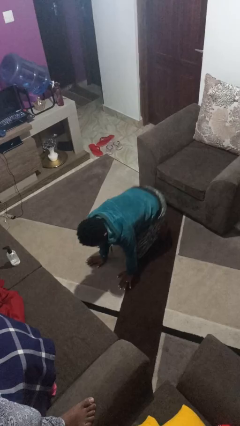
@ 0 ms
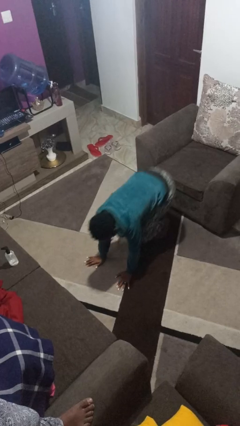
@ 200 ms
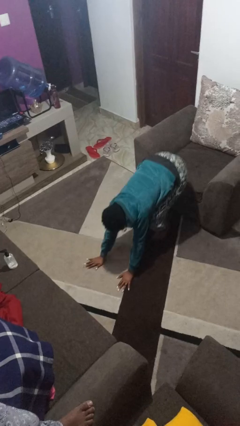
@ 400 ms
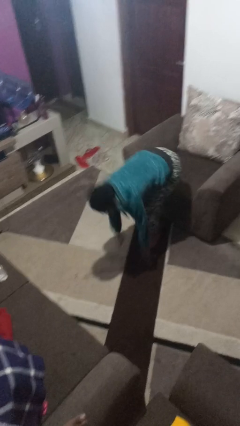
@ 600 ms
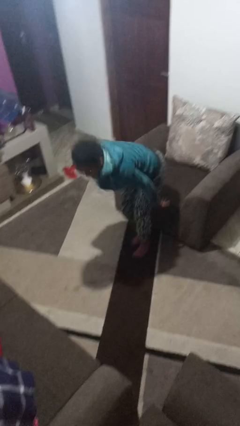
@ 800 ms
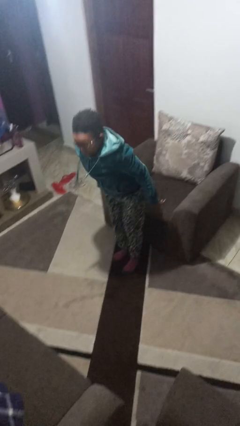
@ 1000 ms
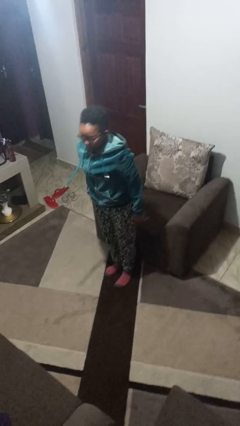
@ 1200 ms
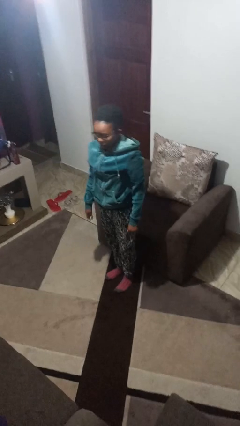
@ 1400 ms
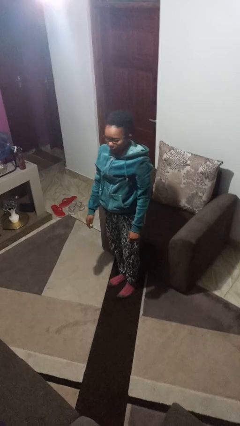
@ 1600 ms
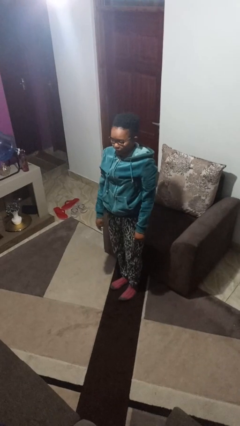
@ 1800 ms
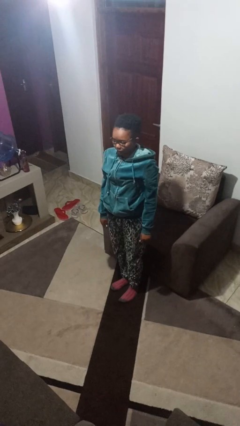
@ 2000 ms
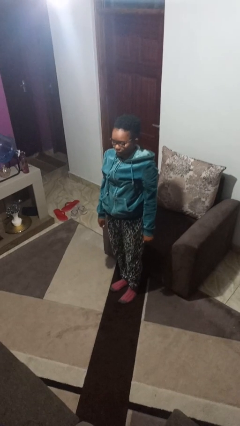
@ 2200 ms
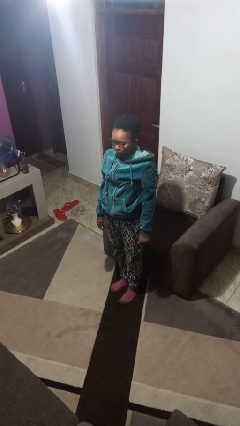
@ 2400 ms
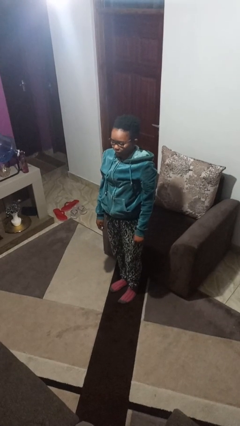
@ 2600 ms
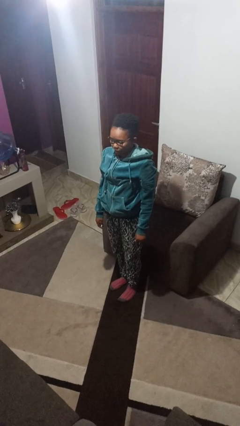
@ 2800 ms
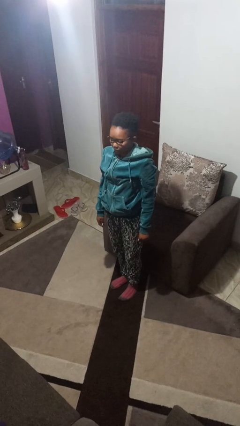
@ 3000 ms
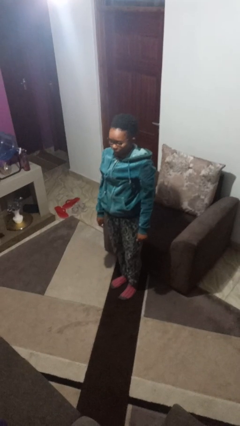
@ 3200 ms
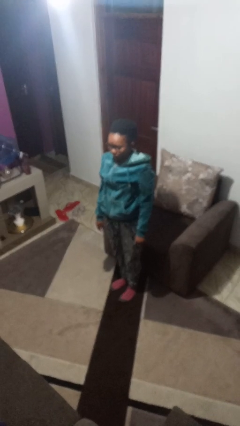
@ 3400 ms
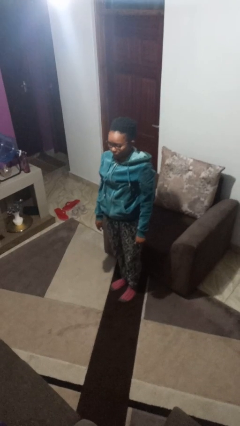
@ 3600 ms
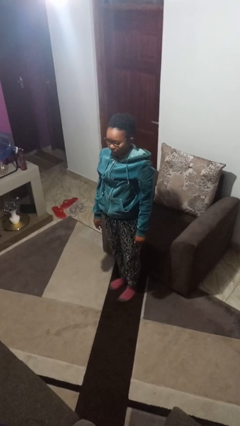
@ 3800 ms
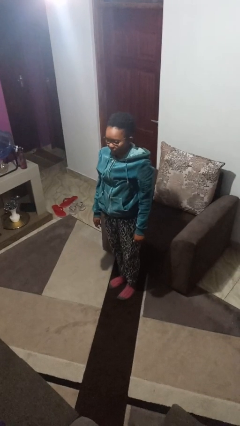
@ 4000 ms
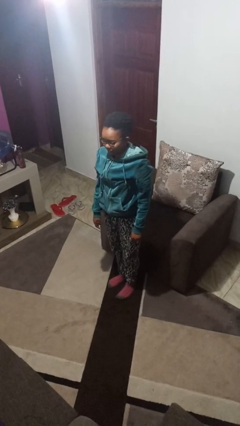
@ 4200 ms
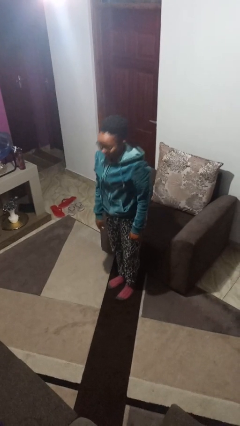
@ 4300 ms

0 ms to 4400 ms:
person stands up from floor

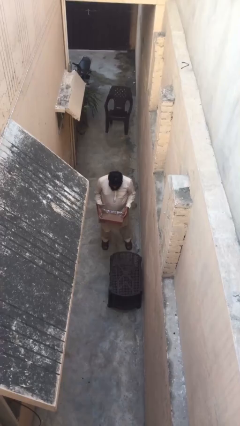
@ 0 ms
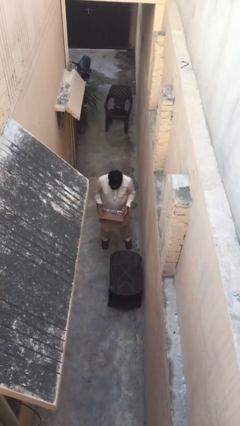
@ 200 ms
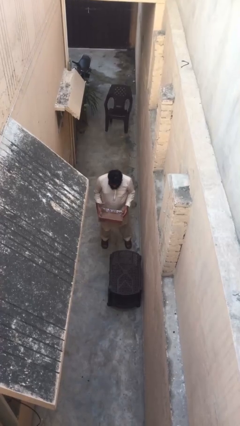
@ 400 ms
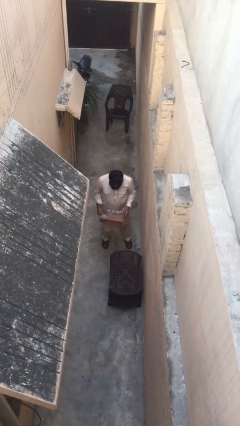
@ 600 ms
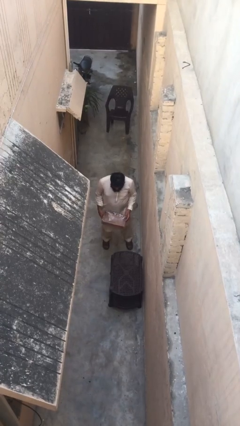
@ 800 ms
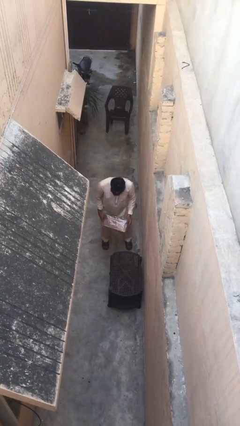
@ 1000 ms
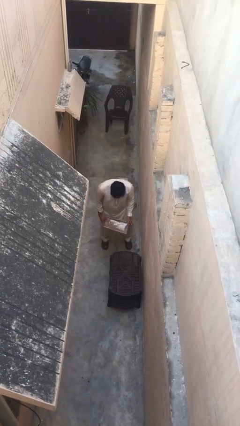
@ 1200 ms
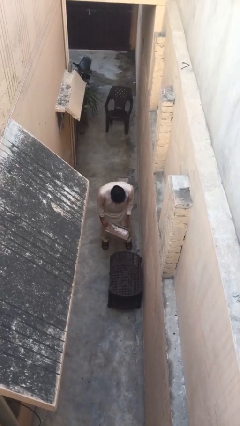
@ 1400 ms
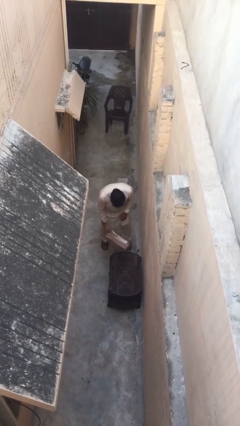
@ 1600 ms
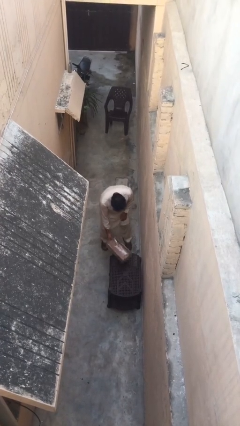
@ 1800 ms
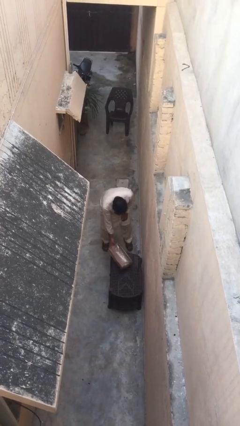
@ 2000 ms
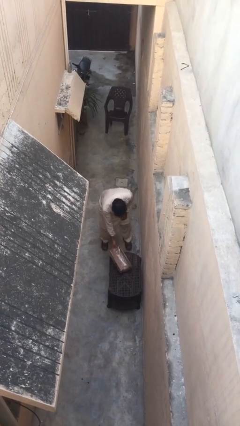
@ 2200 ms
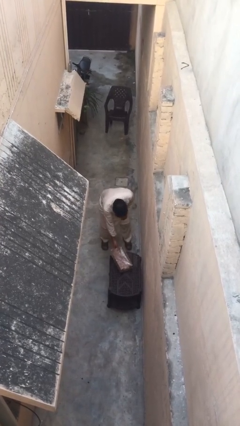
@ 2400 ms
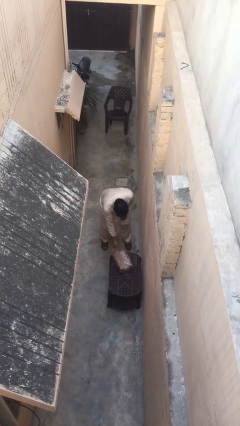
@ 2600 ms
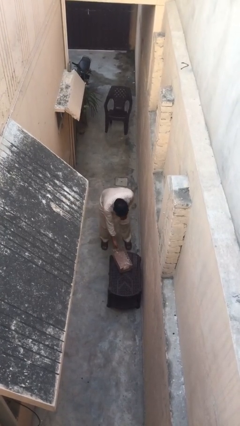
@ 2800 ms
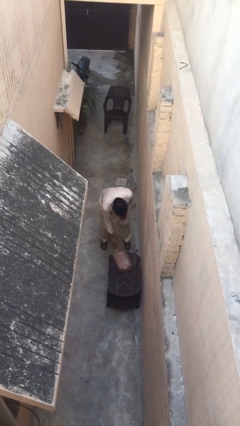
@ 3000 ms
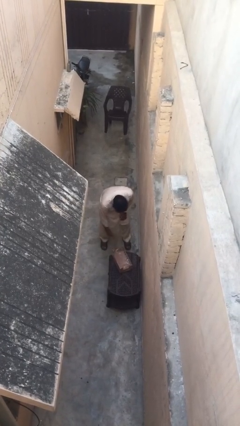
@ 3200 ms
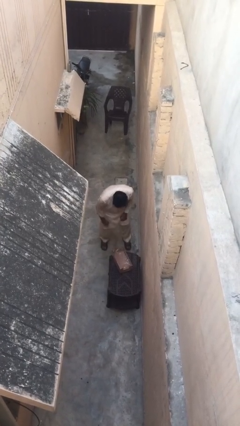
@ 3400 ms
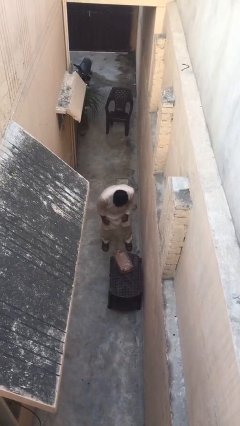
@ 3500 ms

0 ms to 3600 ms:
person puts down object on table

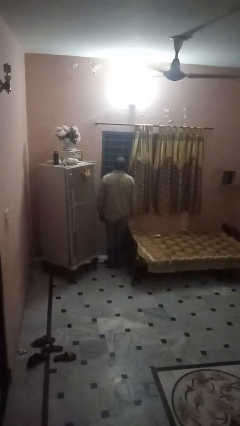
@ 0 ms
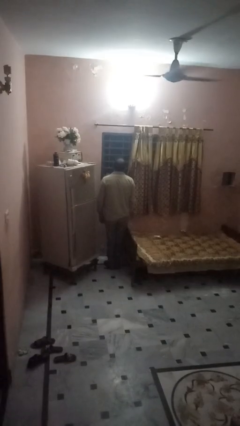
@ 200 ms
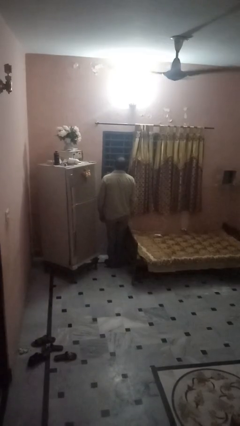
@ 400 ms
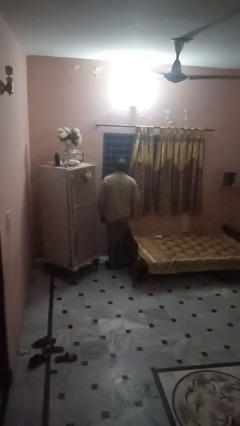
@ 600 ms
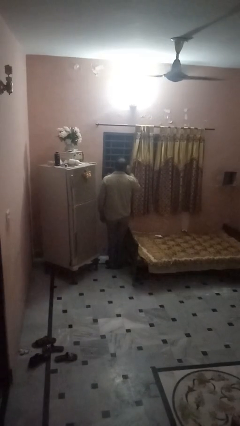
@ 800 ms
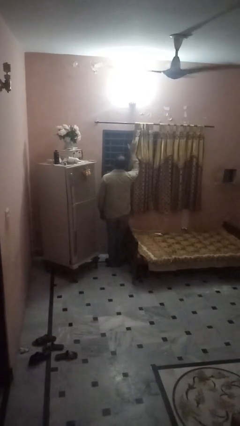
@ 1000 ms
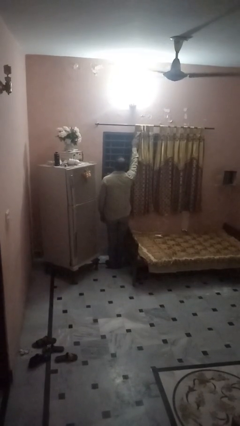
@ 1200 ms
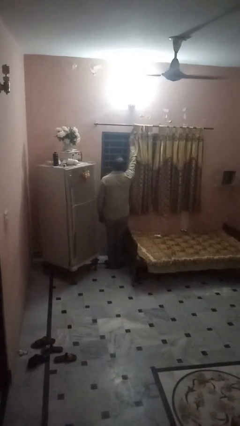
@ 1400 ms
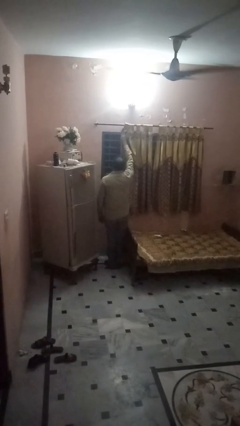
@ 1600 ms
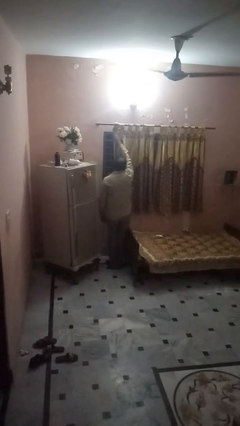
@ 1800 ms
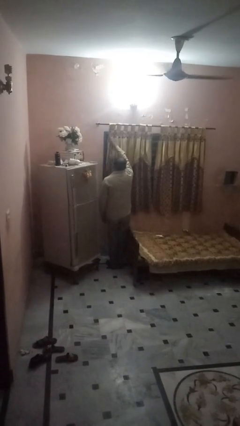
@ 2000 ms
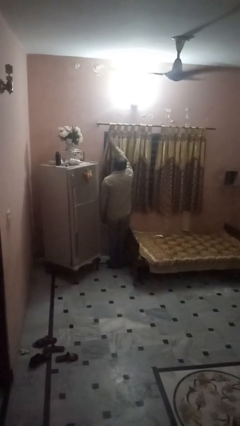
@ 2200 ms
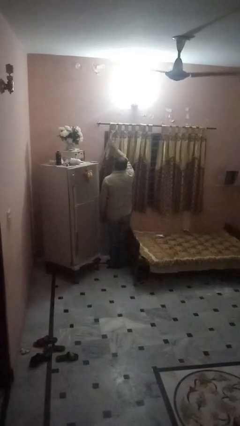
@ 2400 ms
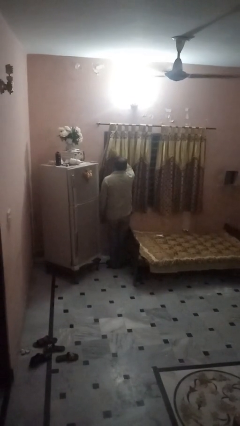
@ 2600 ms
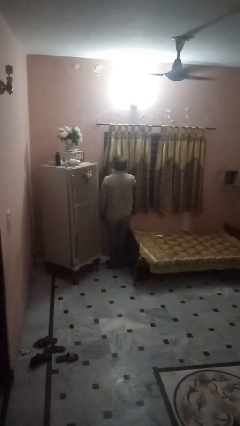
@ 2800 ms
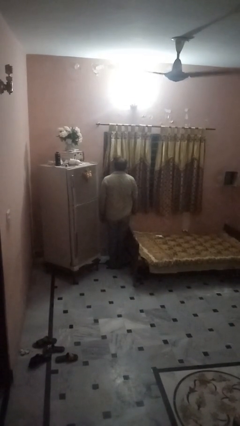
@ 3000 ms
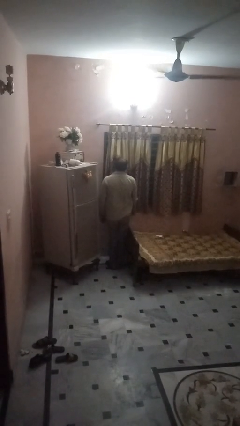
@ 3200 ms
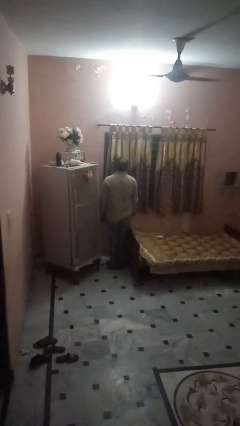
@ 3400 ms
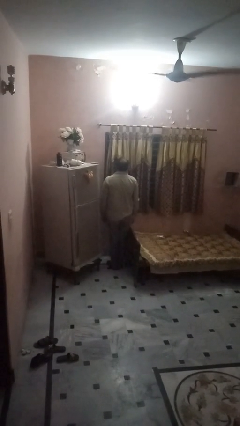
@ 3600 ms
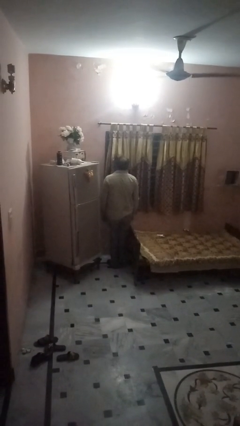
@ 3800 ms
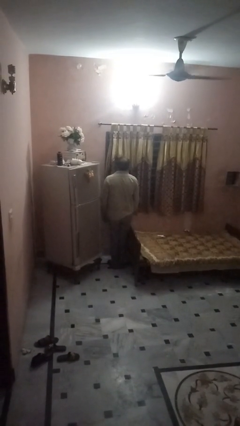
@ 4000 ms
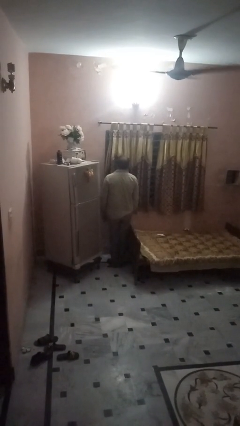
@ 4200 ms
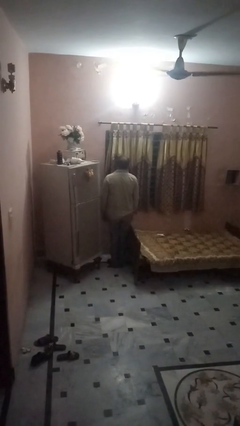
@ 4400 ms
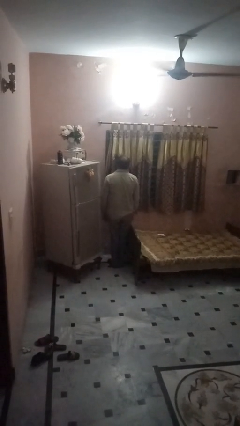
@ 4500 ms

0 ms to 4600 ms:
person closes curtains

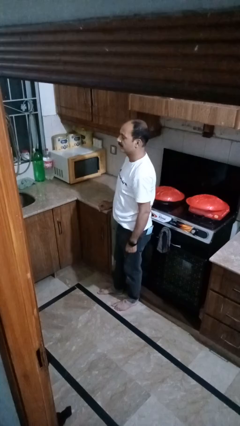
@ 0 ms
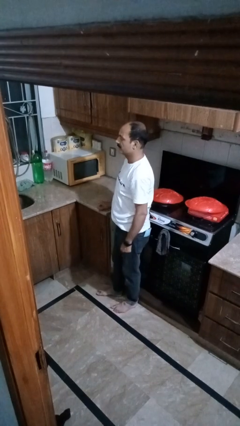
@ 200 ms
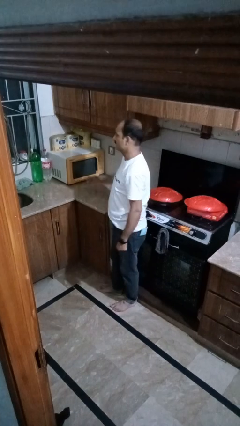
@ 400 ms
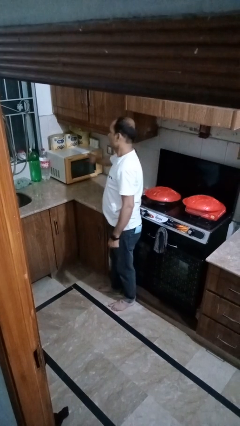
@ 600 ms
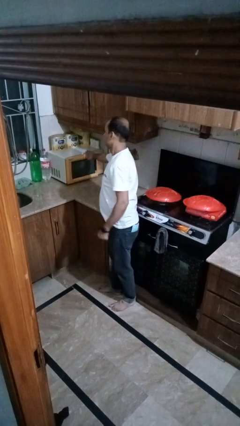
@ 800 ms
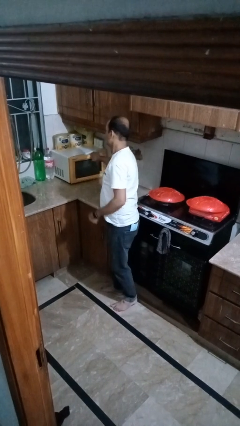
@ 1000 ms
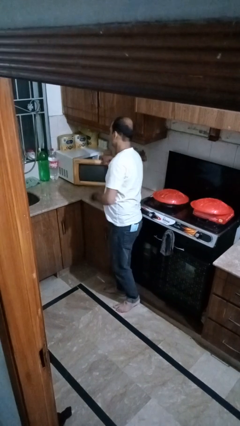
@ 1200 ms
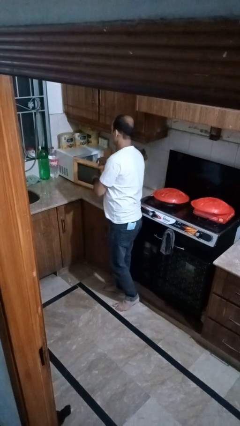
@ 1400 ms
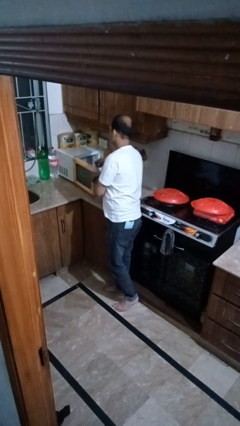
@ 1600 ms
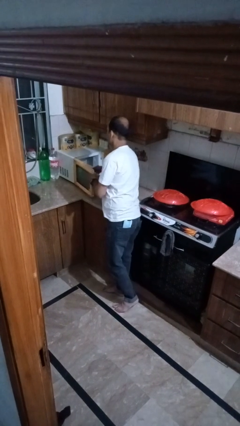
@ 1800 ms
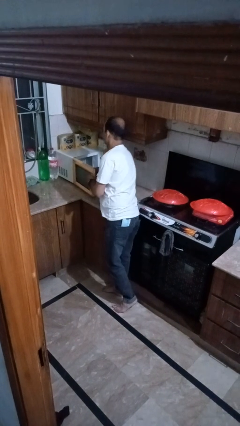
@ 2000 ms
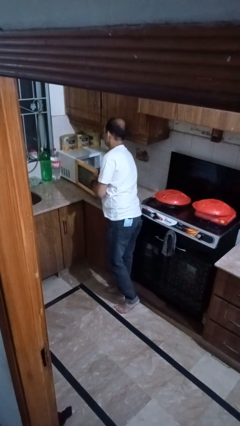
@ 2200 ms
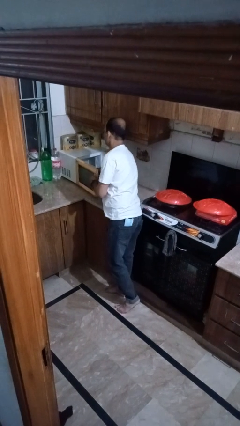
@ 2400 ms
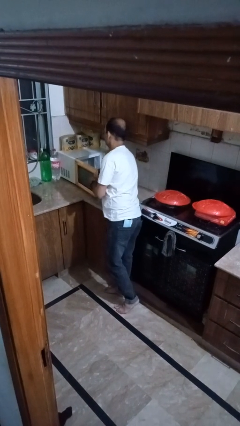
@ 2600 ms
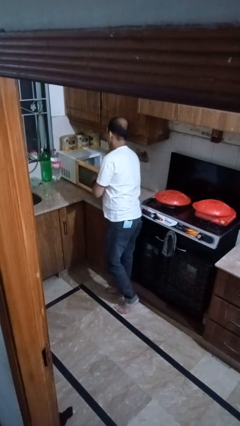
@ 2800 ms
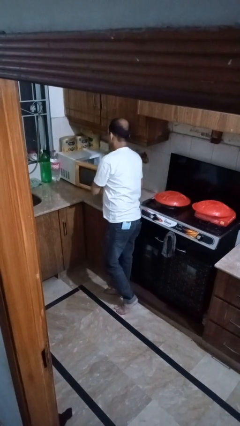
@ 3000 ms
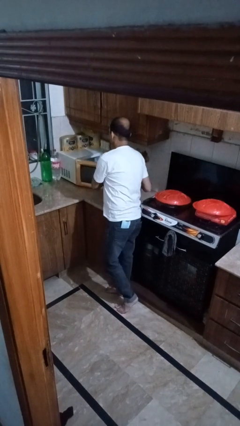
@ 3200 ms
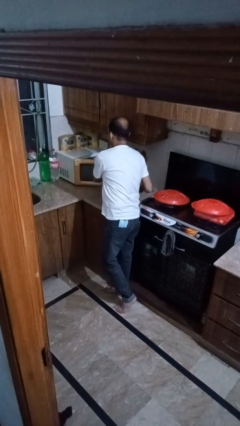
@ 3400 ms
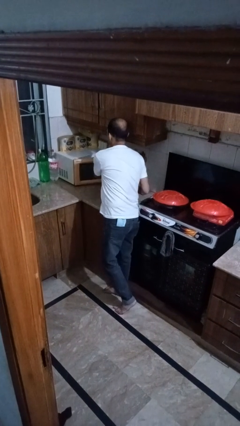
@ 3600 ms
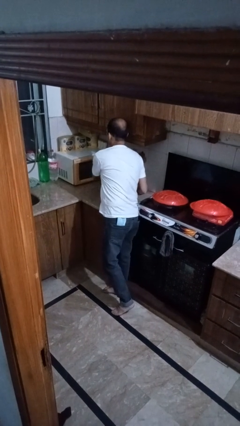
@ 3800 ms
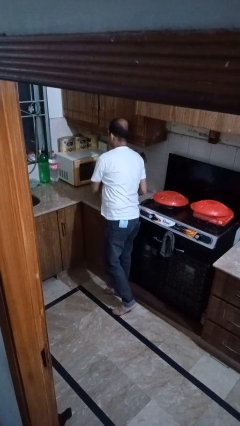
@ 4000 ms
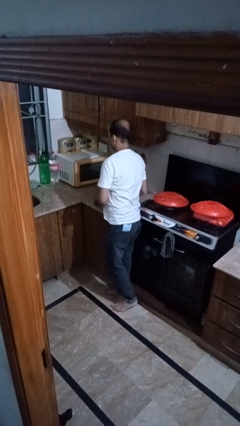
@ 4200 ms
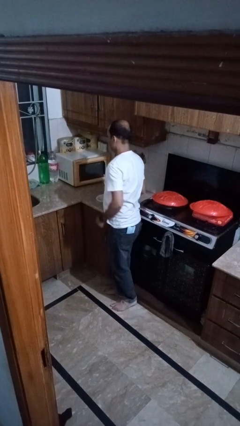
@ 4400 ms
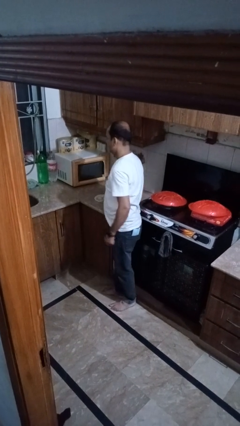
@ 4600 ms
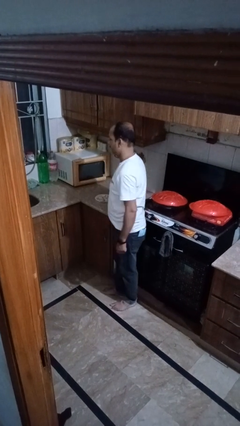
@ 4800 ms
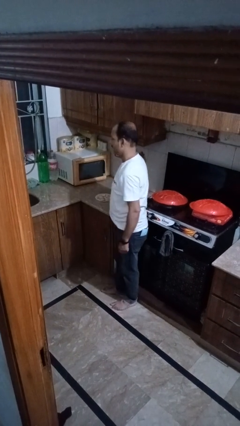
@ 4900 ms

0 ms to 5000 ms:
person takes object from microwave
